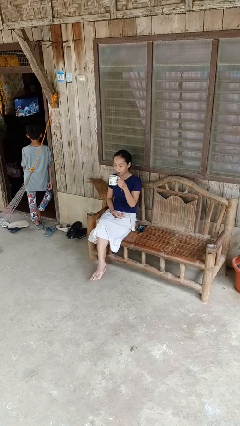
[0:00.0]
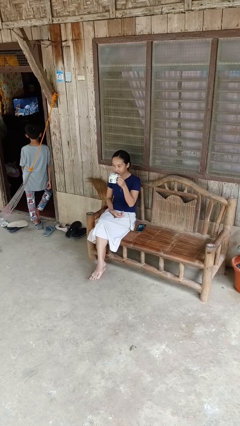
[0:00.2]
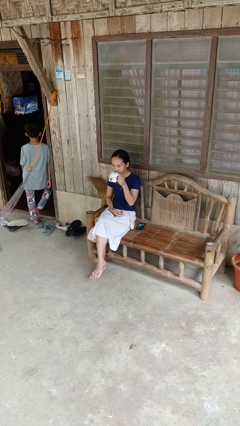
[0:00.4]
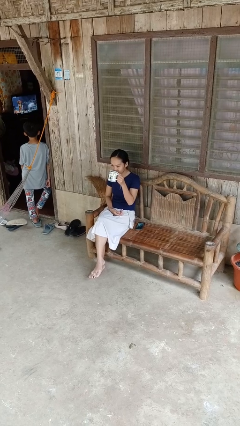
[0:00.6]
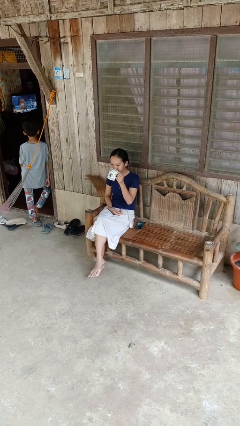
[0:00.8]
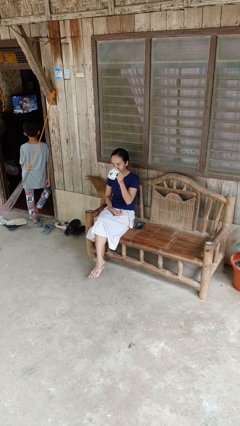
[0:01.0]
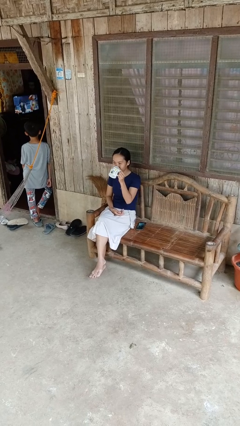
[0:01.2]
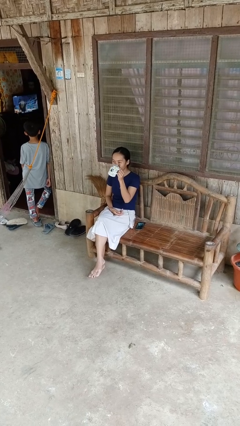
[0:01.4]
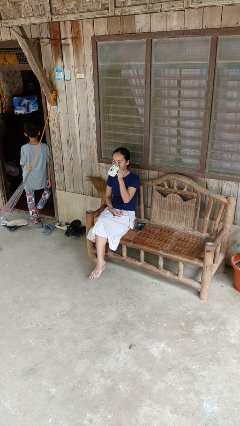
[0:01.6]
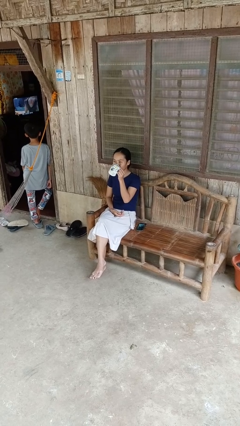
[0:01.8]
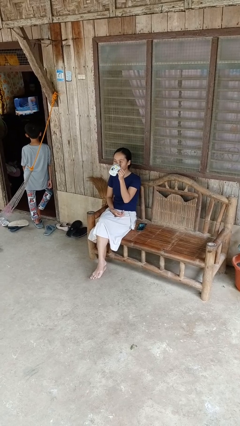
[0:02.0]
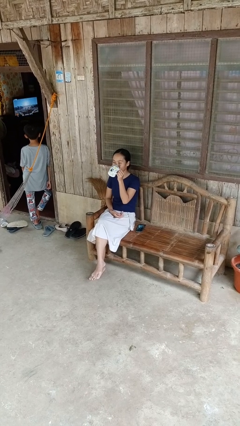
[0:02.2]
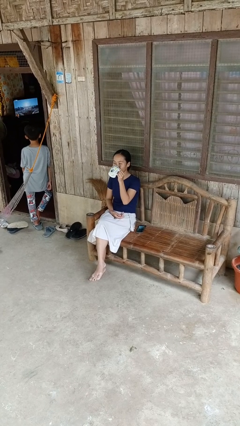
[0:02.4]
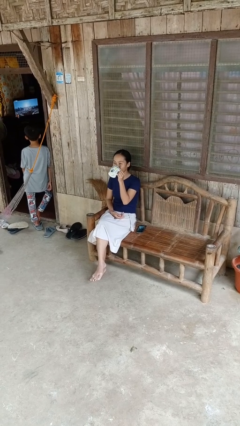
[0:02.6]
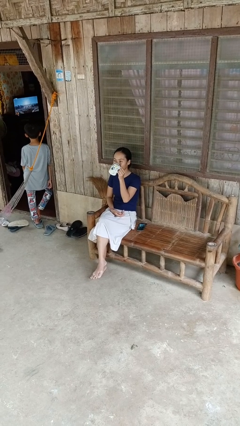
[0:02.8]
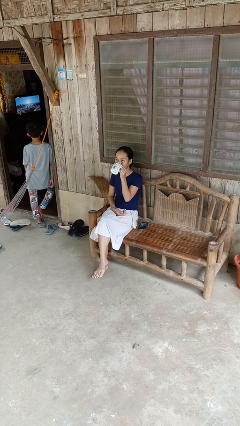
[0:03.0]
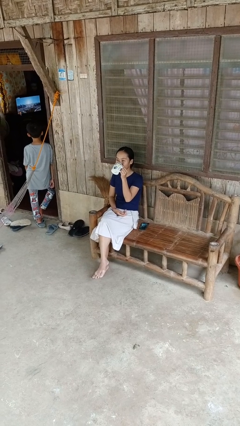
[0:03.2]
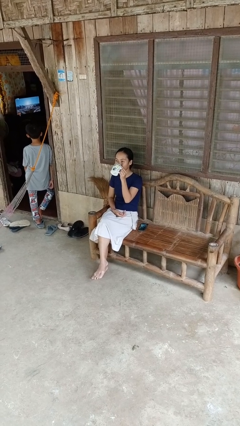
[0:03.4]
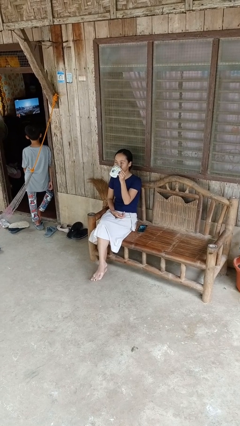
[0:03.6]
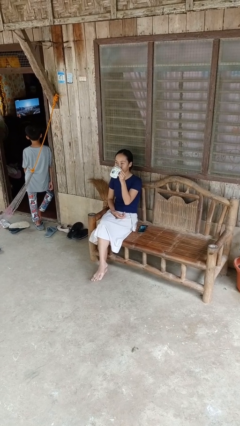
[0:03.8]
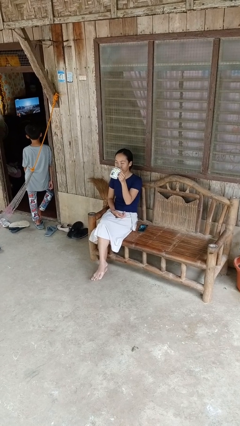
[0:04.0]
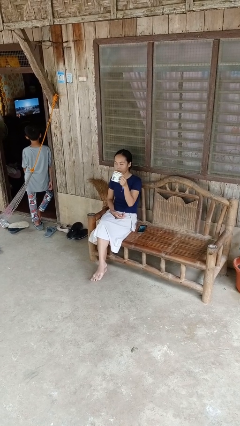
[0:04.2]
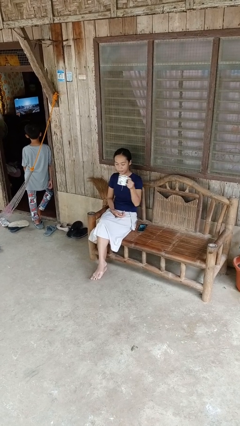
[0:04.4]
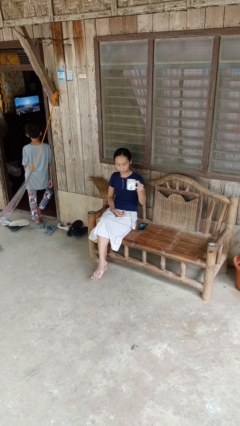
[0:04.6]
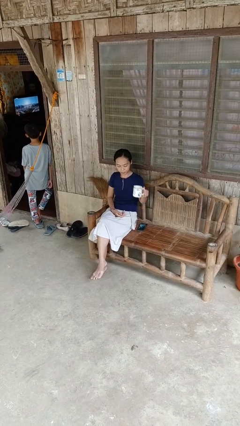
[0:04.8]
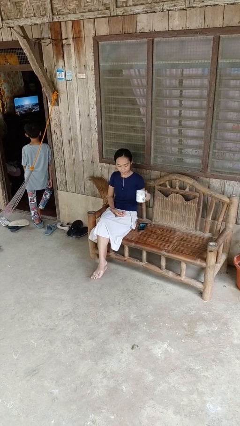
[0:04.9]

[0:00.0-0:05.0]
person drinks from mug

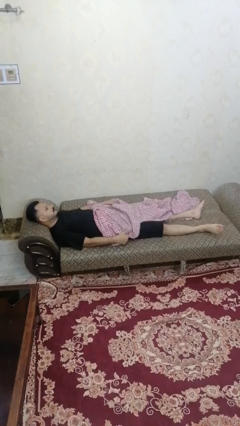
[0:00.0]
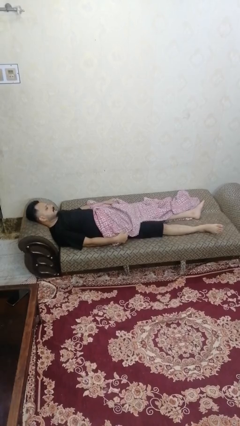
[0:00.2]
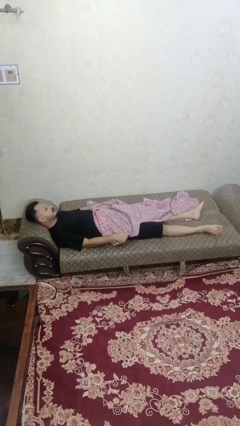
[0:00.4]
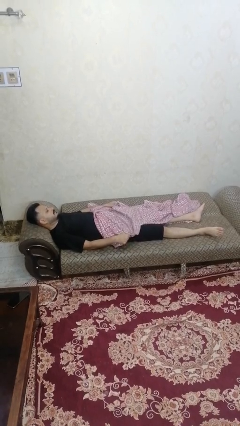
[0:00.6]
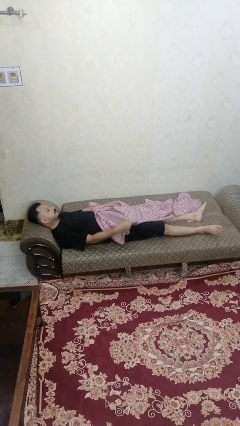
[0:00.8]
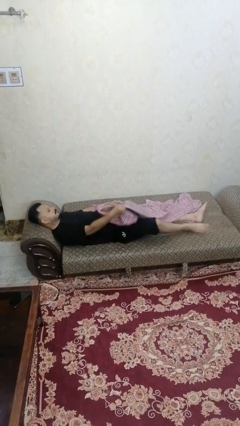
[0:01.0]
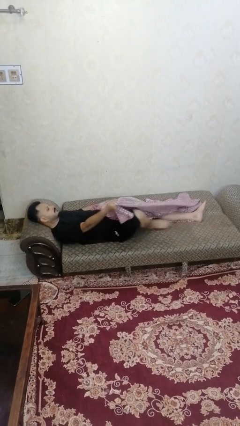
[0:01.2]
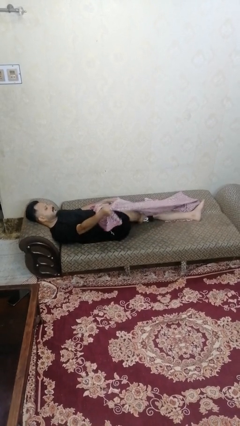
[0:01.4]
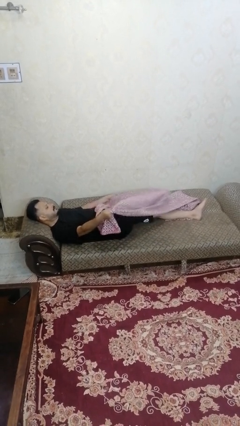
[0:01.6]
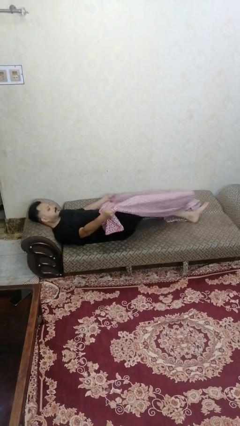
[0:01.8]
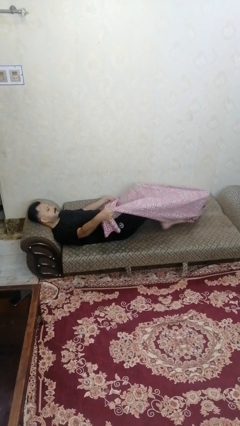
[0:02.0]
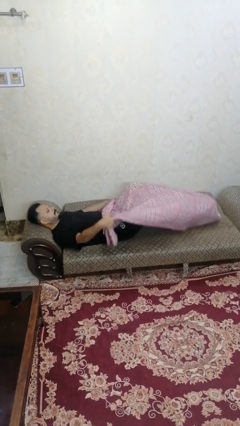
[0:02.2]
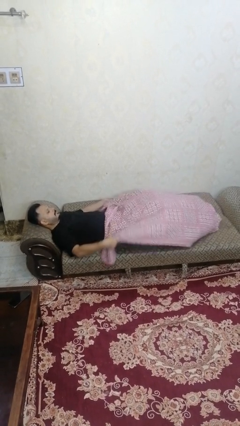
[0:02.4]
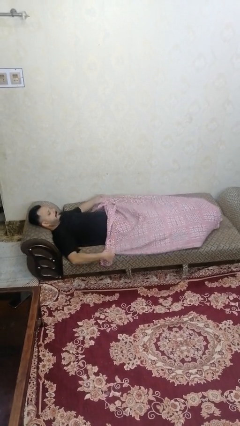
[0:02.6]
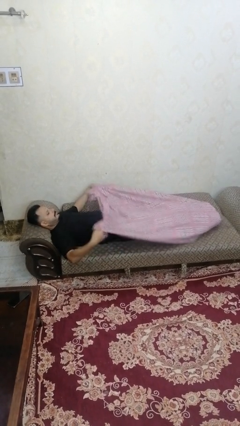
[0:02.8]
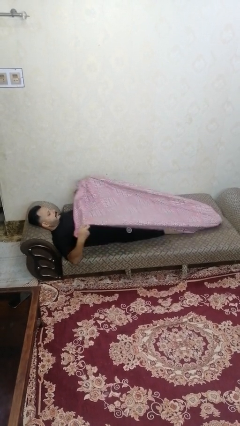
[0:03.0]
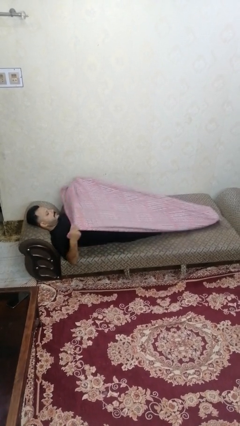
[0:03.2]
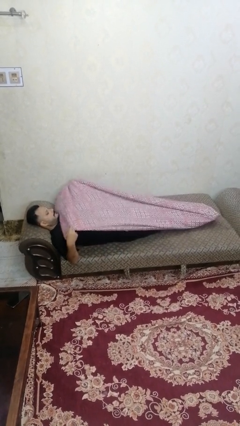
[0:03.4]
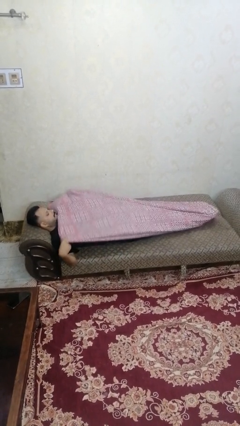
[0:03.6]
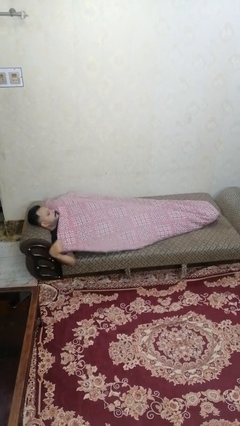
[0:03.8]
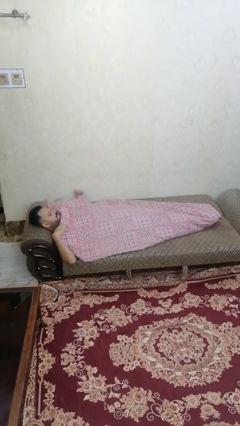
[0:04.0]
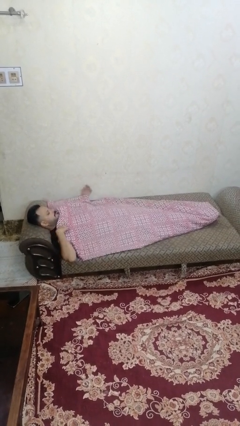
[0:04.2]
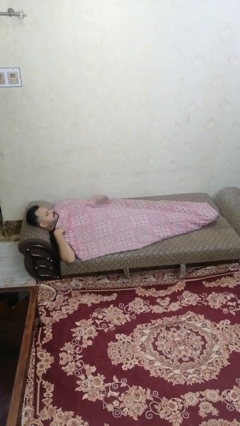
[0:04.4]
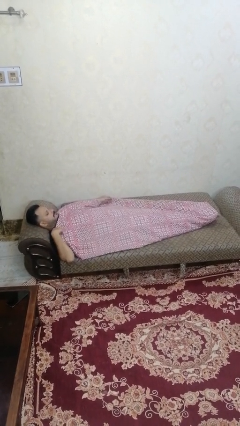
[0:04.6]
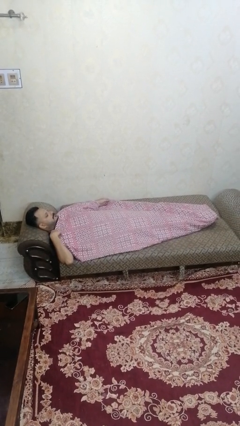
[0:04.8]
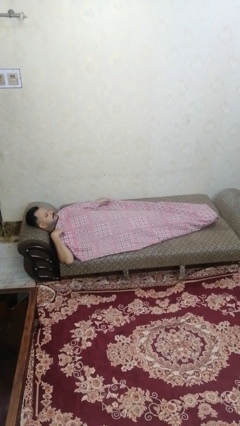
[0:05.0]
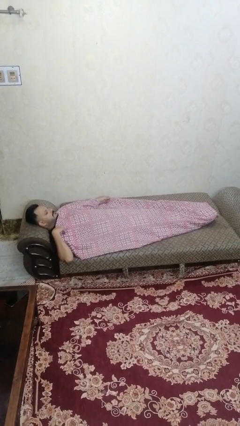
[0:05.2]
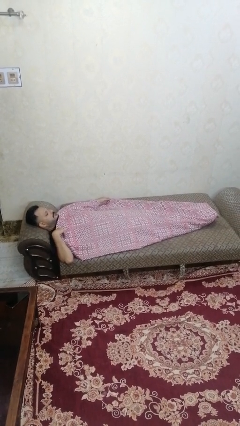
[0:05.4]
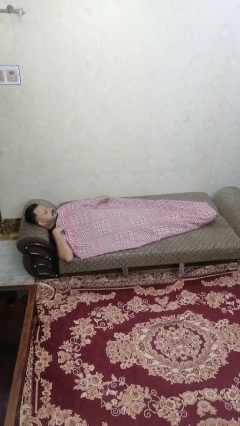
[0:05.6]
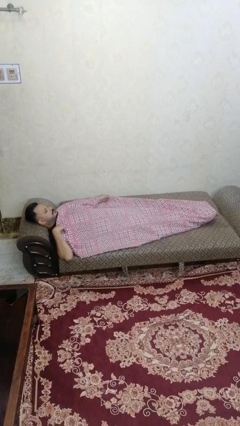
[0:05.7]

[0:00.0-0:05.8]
person covers with bedsheets

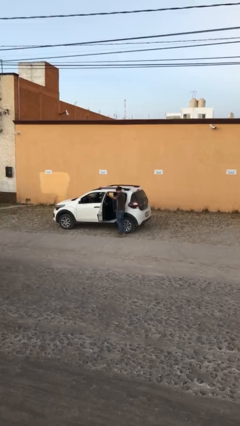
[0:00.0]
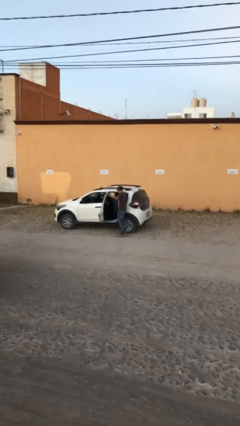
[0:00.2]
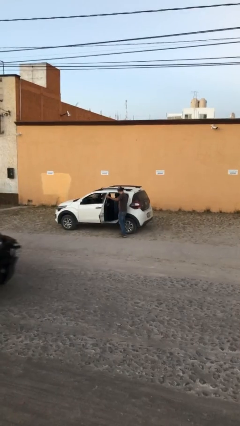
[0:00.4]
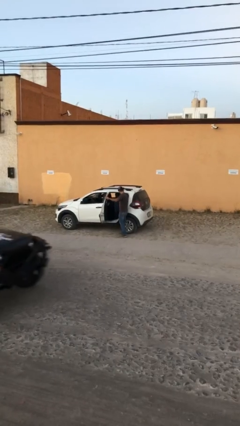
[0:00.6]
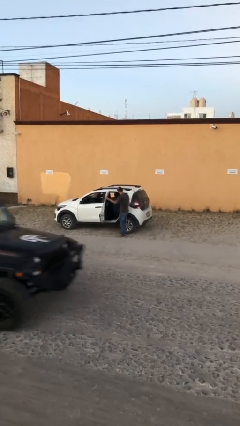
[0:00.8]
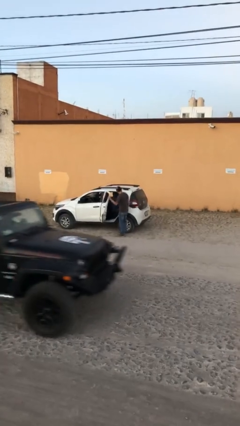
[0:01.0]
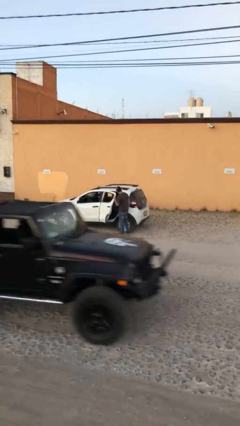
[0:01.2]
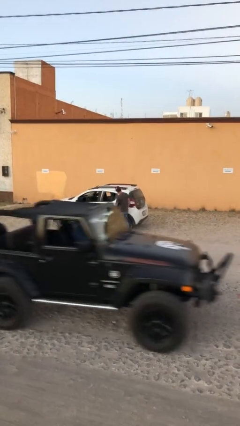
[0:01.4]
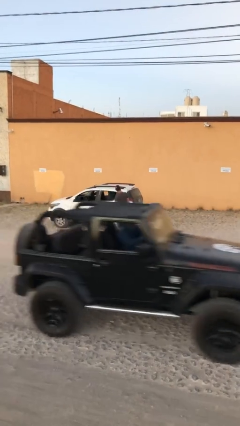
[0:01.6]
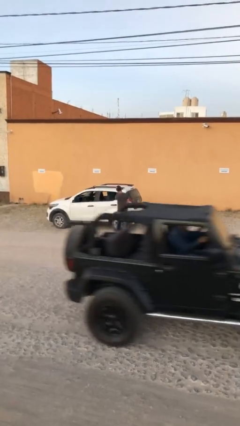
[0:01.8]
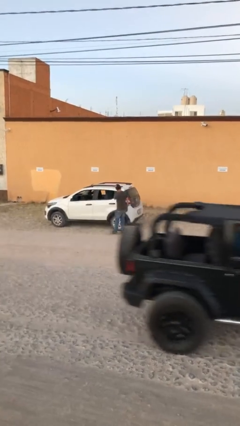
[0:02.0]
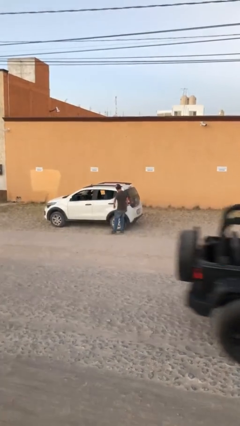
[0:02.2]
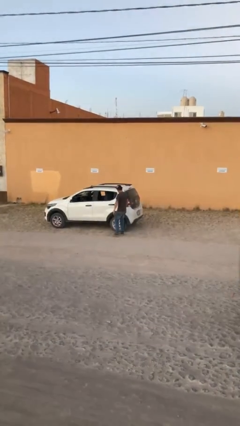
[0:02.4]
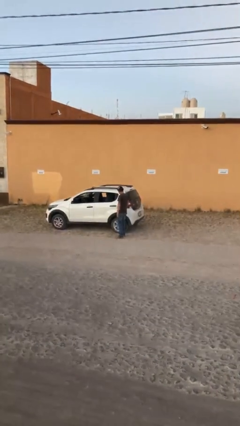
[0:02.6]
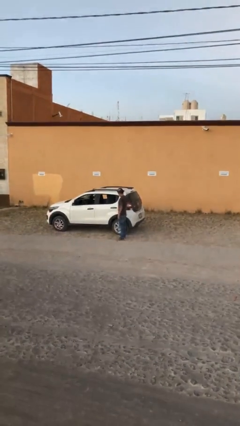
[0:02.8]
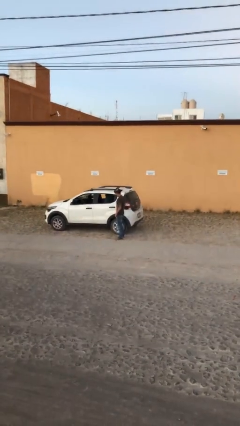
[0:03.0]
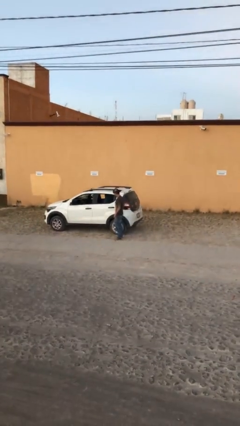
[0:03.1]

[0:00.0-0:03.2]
person closes car door

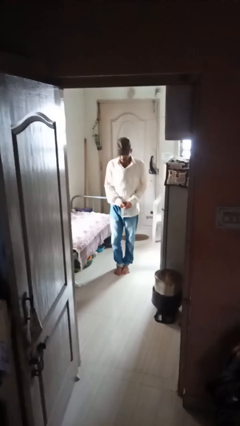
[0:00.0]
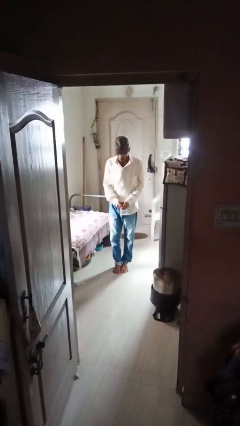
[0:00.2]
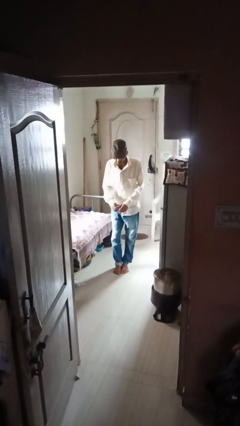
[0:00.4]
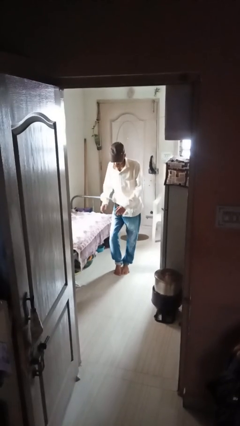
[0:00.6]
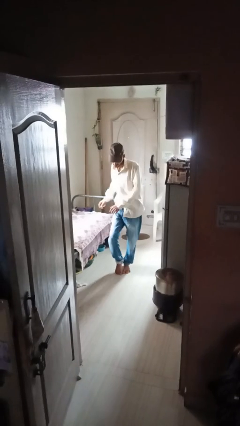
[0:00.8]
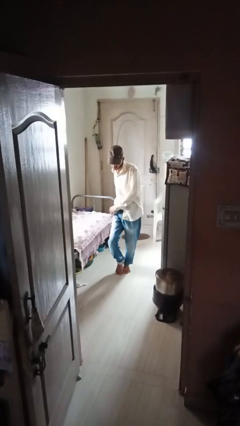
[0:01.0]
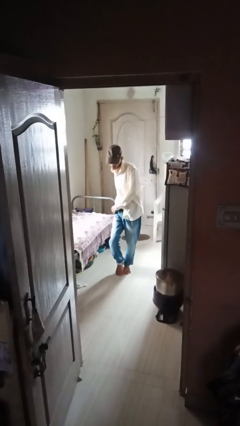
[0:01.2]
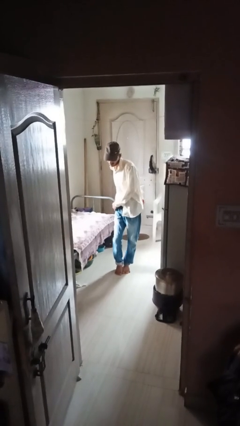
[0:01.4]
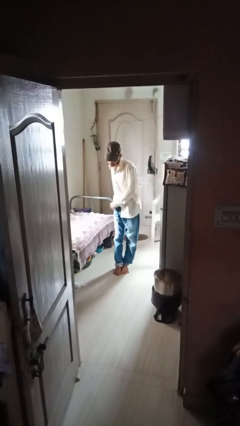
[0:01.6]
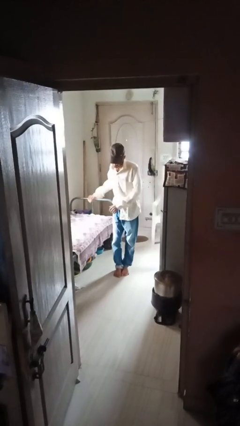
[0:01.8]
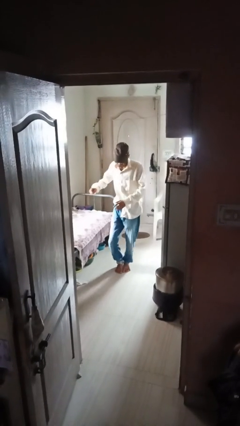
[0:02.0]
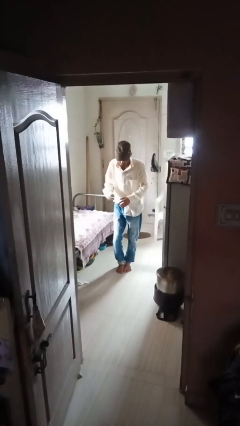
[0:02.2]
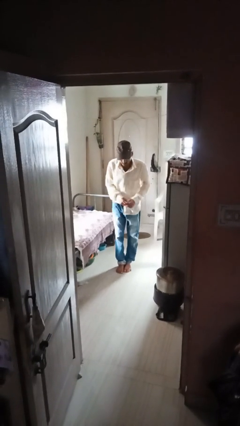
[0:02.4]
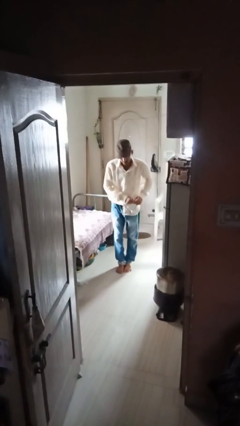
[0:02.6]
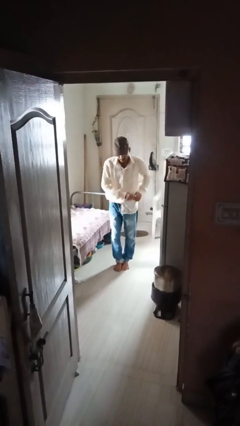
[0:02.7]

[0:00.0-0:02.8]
person dances in place

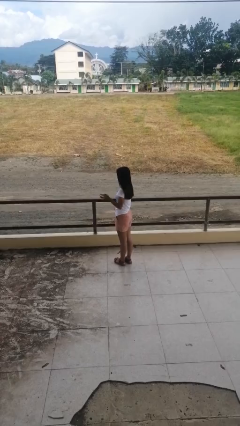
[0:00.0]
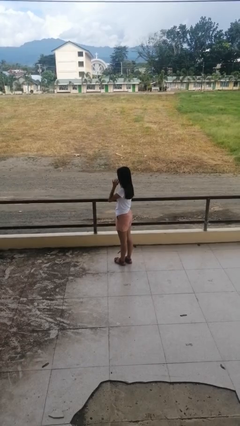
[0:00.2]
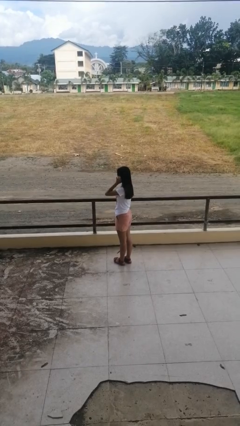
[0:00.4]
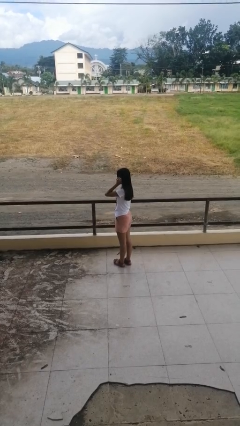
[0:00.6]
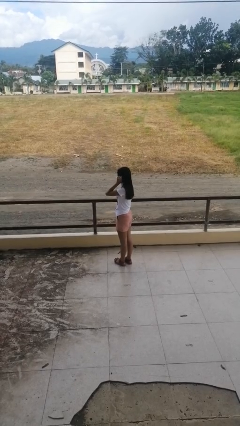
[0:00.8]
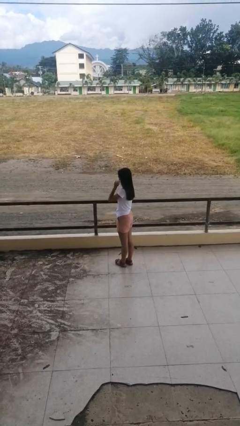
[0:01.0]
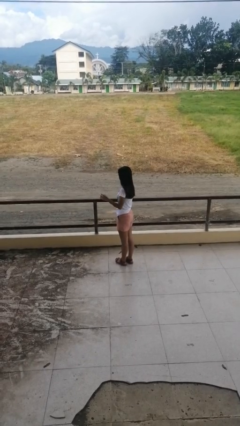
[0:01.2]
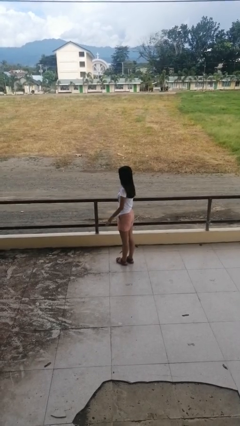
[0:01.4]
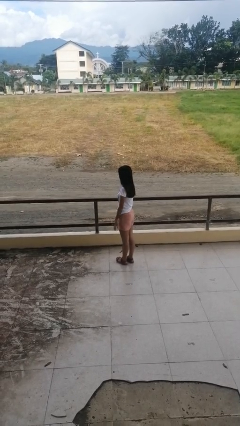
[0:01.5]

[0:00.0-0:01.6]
person touches earlobe
